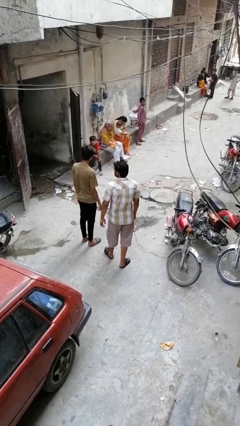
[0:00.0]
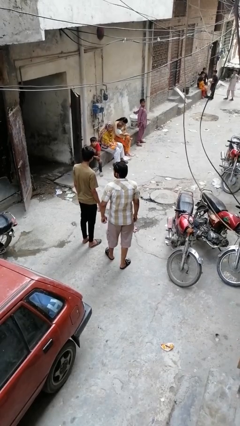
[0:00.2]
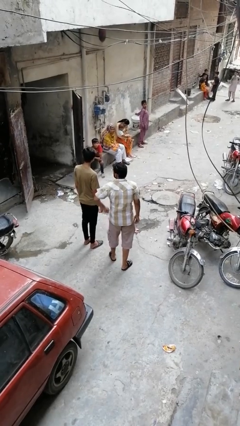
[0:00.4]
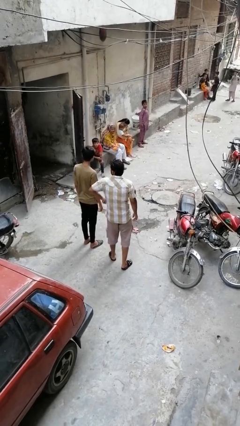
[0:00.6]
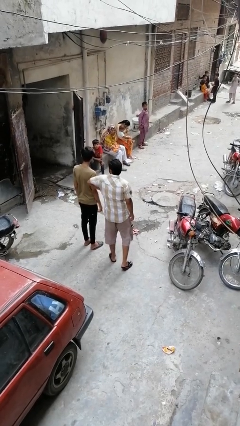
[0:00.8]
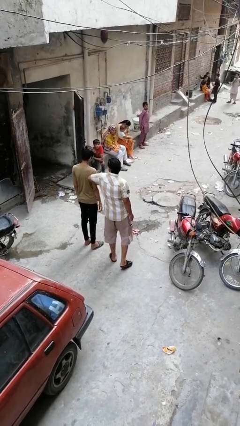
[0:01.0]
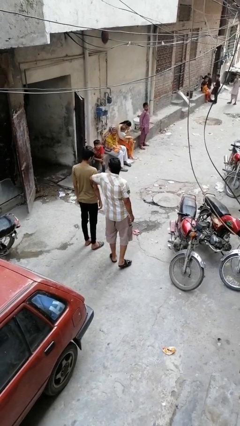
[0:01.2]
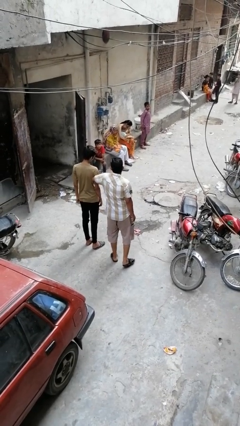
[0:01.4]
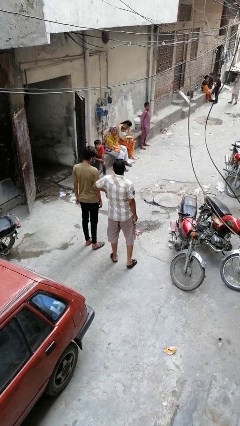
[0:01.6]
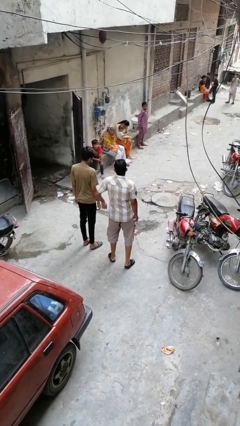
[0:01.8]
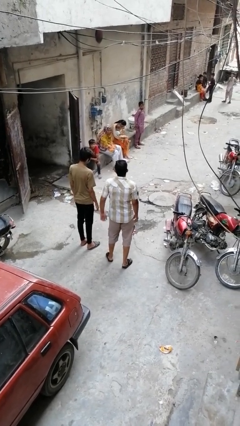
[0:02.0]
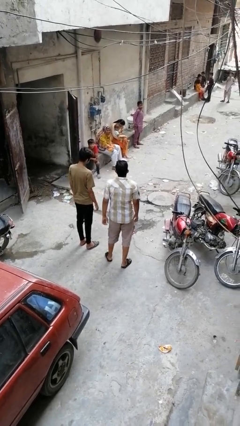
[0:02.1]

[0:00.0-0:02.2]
person nudges person with elbow

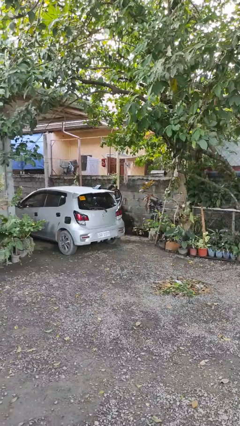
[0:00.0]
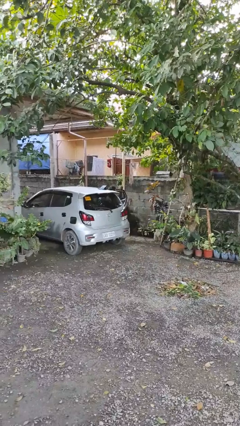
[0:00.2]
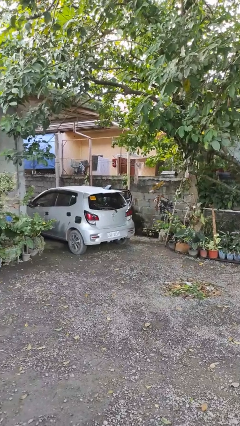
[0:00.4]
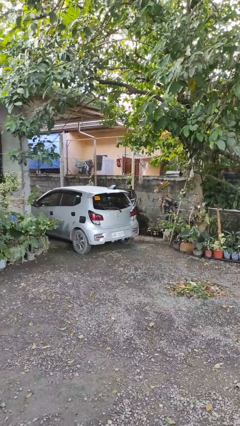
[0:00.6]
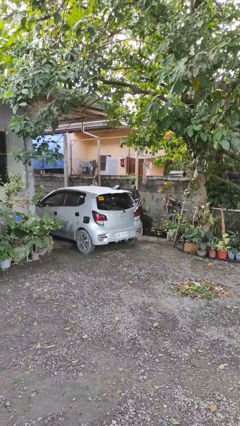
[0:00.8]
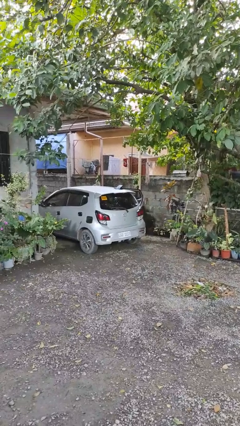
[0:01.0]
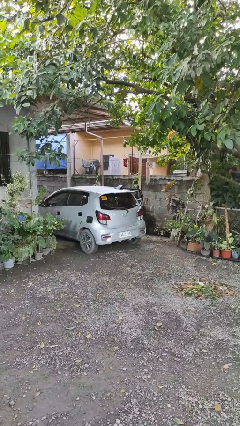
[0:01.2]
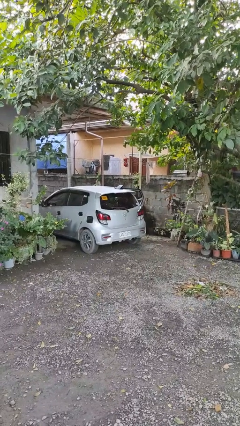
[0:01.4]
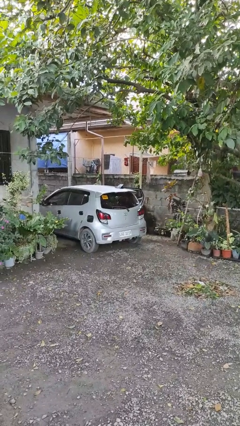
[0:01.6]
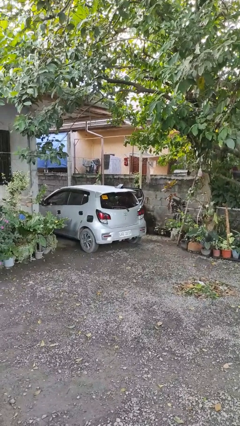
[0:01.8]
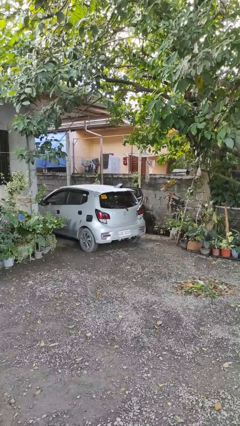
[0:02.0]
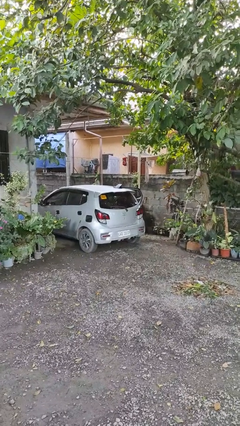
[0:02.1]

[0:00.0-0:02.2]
person enters car

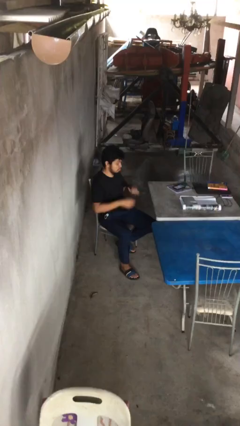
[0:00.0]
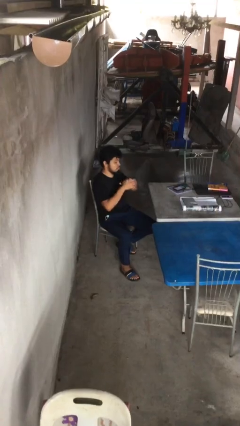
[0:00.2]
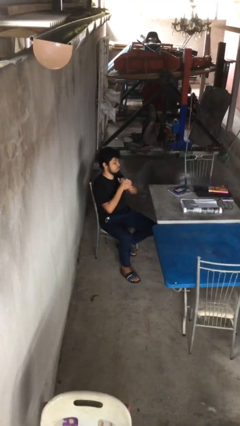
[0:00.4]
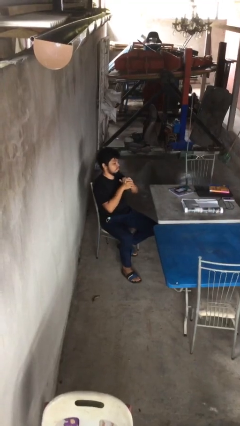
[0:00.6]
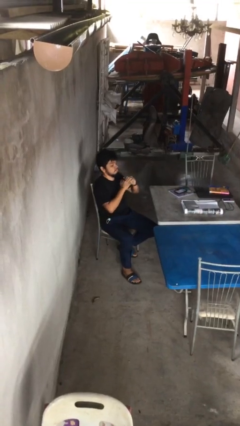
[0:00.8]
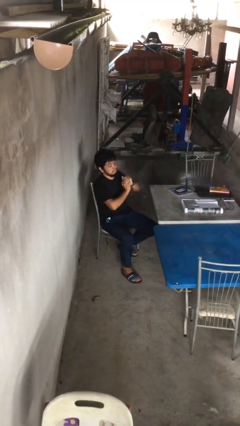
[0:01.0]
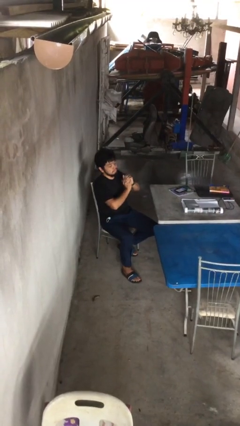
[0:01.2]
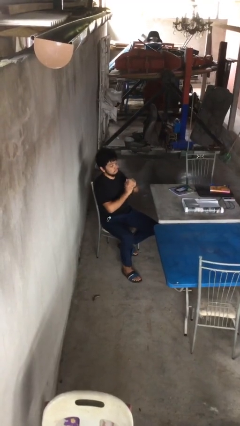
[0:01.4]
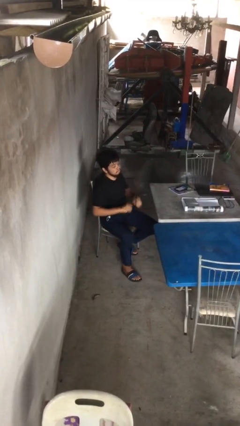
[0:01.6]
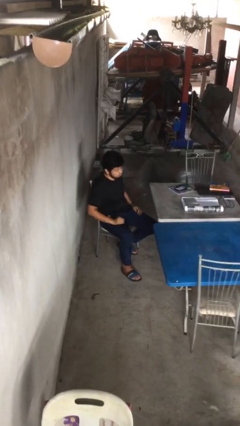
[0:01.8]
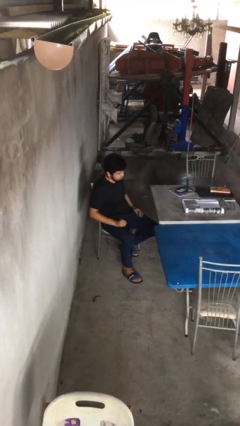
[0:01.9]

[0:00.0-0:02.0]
person cracks knuckles

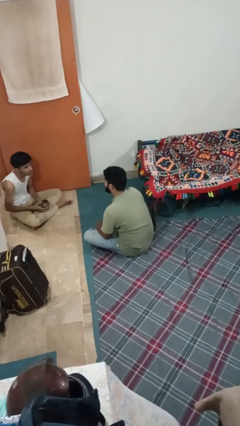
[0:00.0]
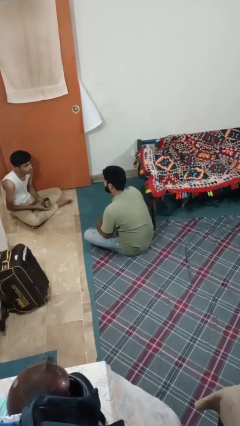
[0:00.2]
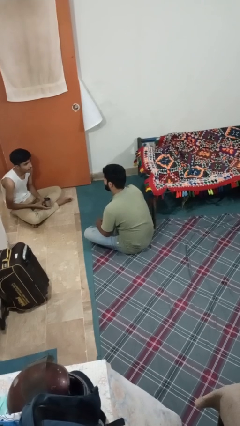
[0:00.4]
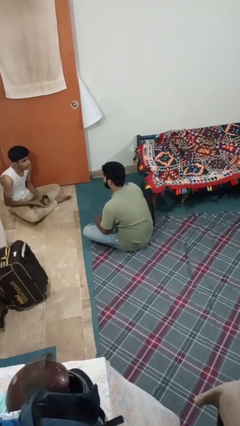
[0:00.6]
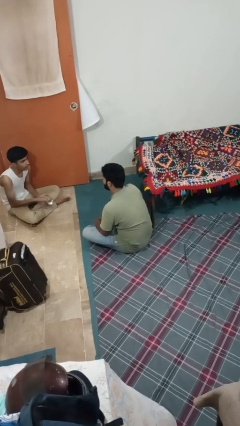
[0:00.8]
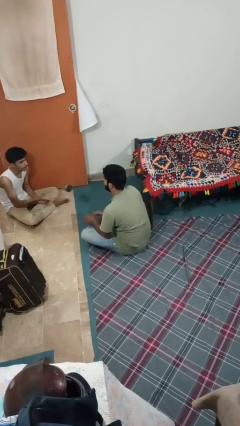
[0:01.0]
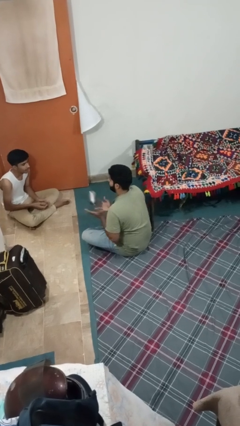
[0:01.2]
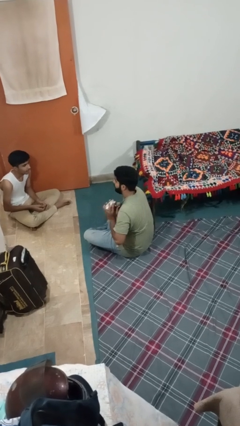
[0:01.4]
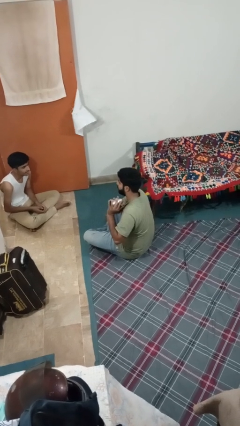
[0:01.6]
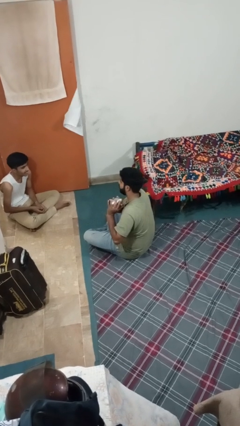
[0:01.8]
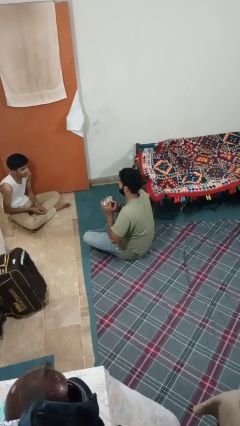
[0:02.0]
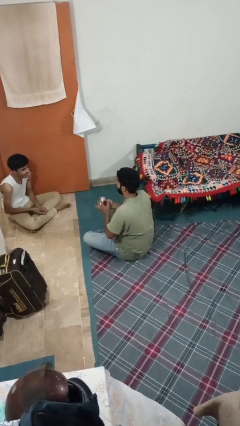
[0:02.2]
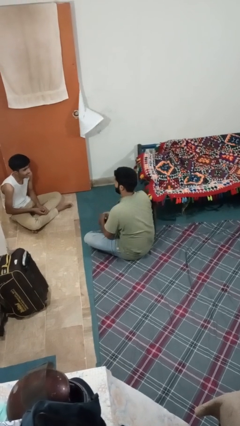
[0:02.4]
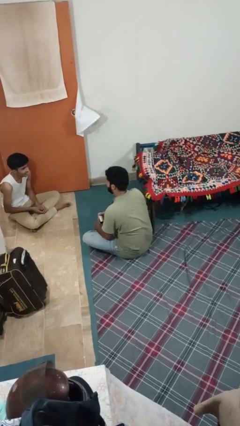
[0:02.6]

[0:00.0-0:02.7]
person catches object from person

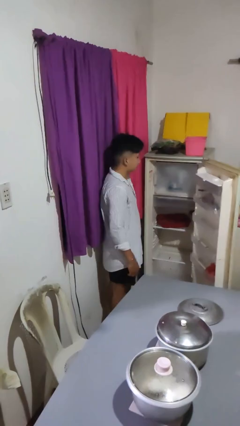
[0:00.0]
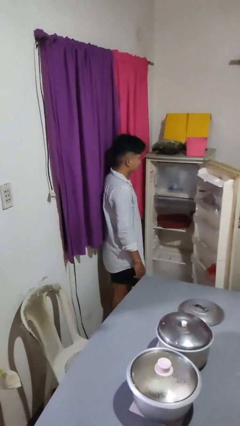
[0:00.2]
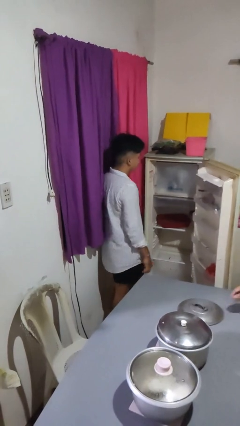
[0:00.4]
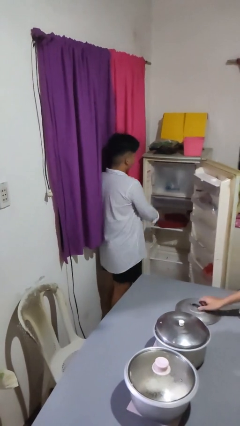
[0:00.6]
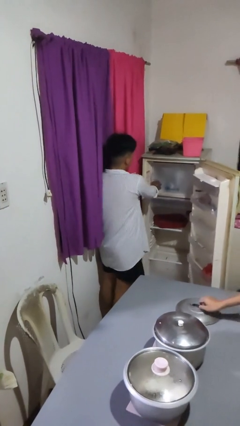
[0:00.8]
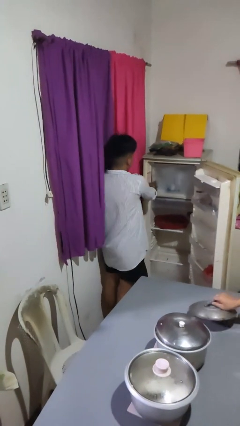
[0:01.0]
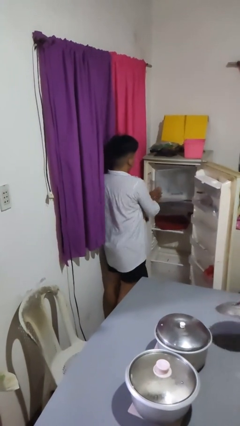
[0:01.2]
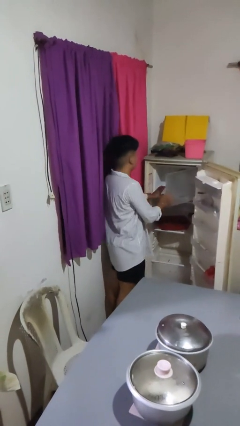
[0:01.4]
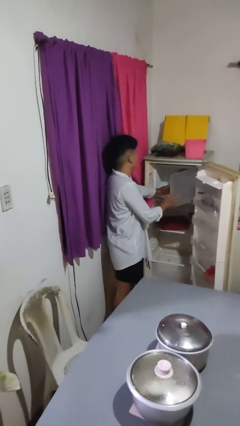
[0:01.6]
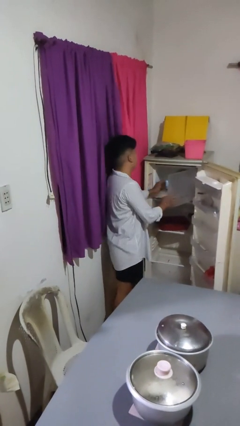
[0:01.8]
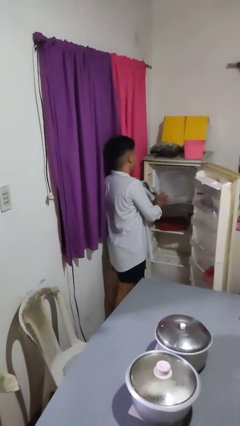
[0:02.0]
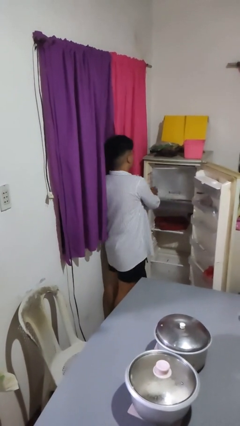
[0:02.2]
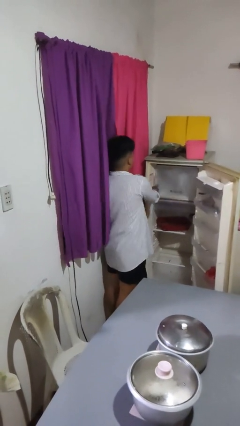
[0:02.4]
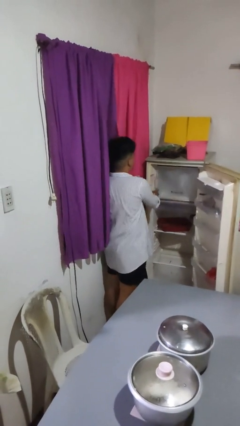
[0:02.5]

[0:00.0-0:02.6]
person takes object from refrigerator

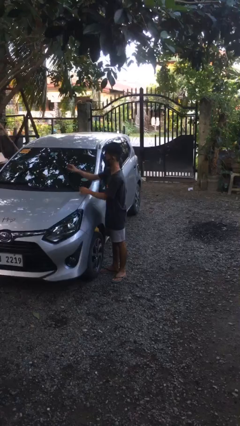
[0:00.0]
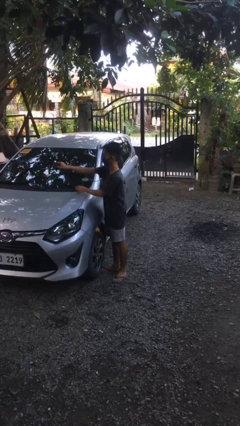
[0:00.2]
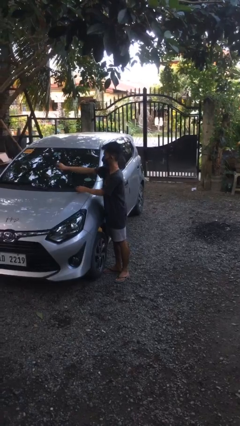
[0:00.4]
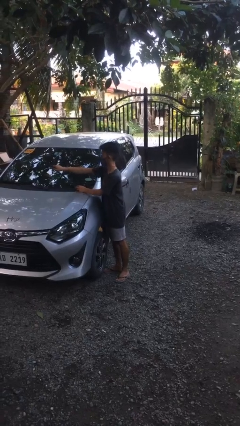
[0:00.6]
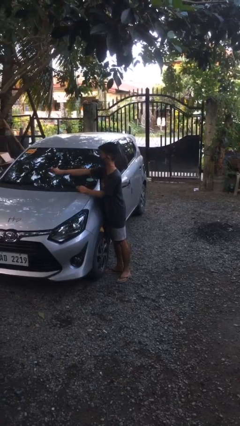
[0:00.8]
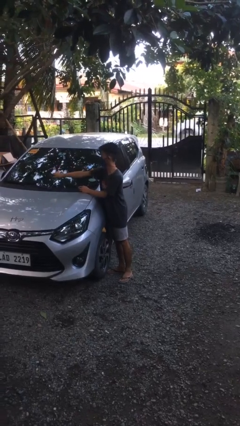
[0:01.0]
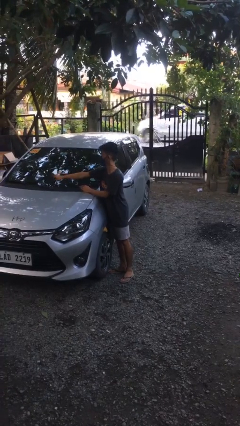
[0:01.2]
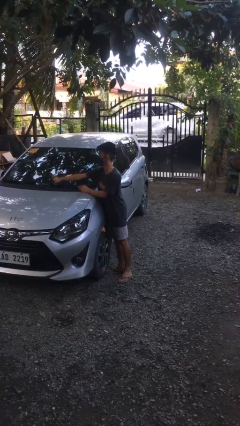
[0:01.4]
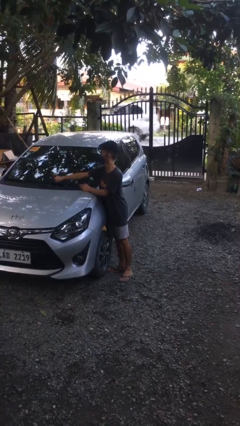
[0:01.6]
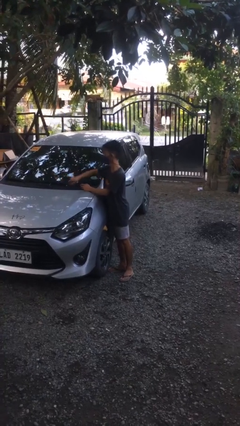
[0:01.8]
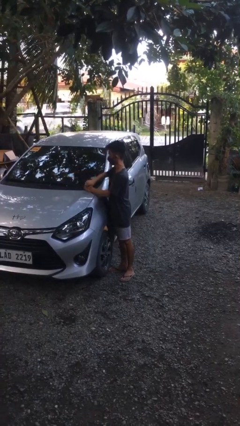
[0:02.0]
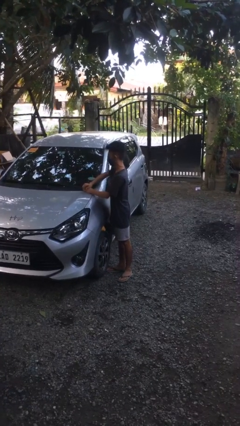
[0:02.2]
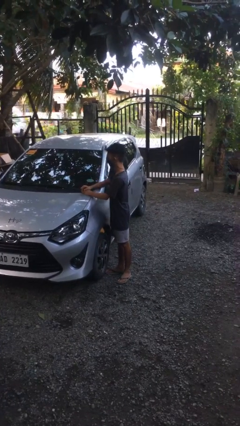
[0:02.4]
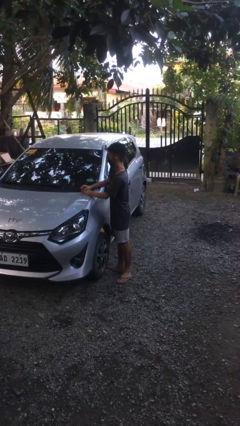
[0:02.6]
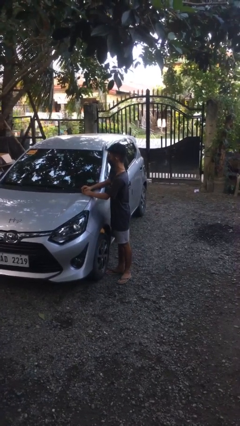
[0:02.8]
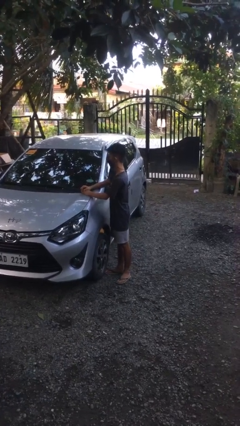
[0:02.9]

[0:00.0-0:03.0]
person flips down car wipers

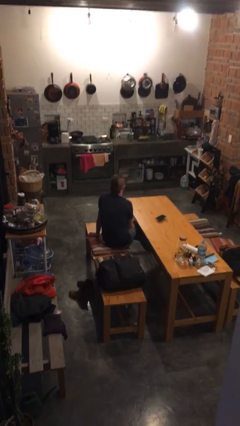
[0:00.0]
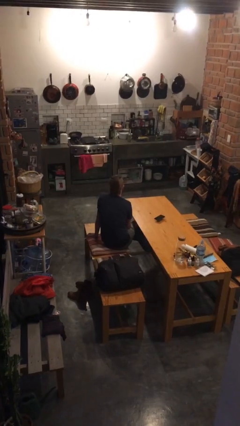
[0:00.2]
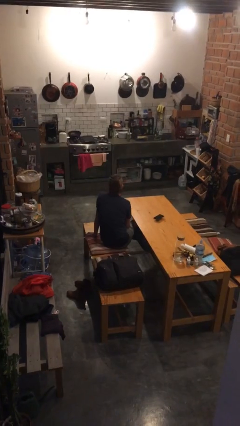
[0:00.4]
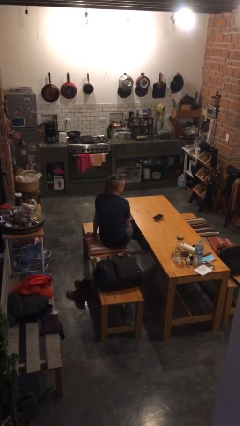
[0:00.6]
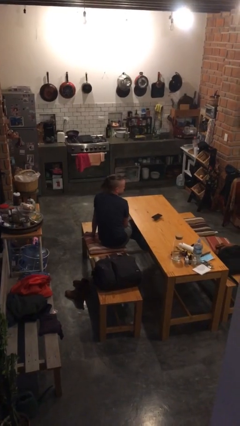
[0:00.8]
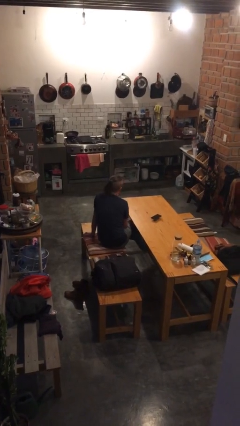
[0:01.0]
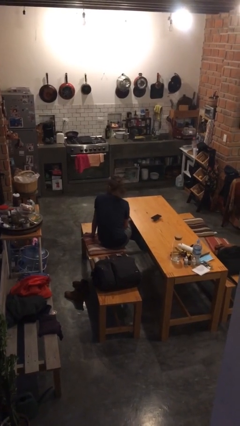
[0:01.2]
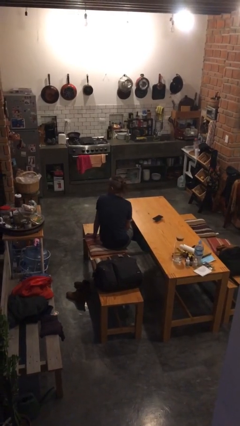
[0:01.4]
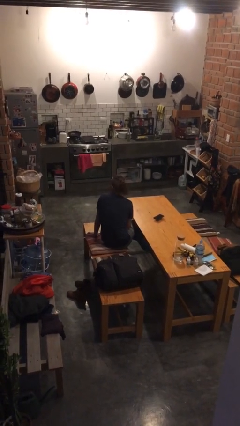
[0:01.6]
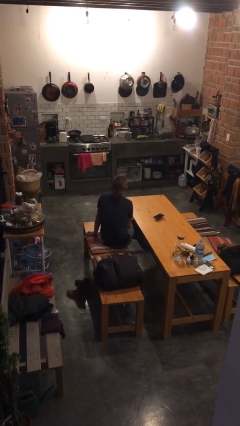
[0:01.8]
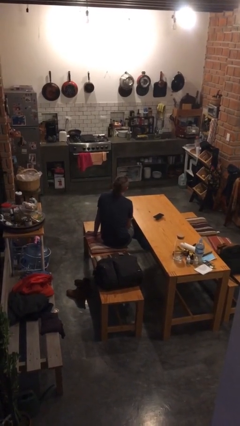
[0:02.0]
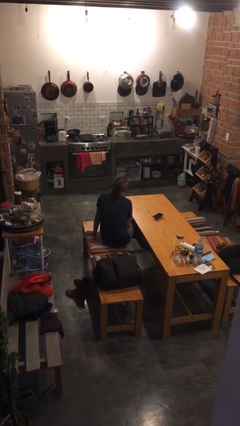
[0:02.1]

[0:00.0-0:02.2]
person shakes head

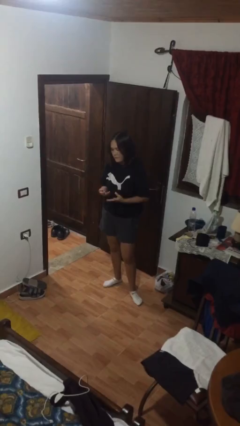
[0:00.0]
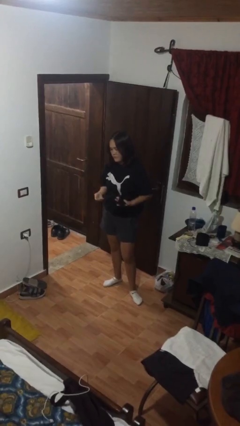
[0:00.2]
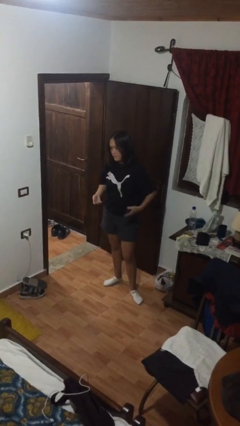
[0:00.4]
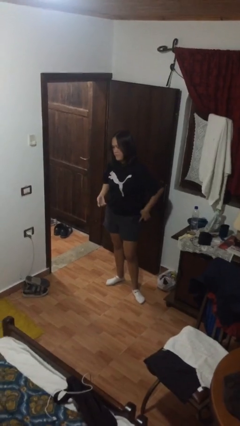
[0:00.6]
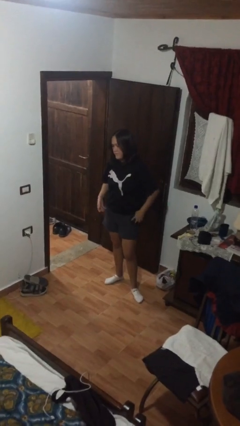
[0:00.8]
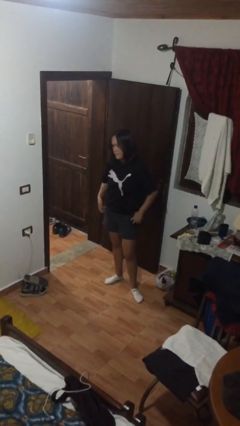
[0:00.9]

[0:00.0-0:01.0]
person puts phone into pocket
